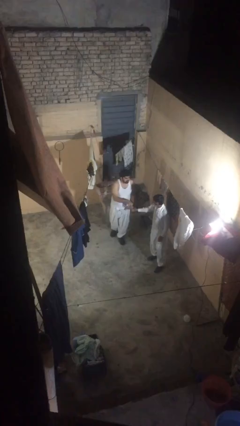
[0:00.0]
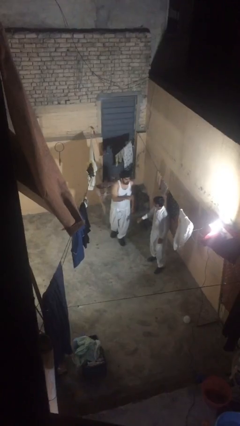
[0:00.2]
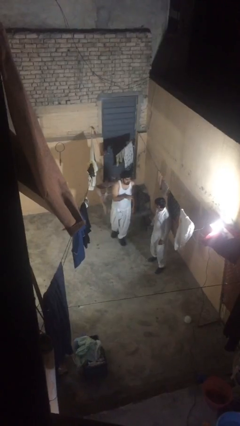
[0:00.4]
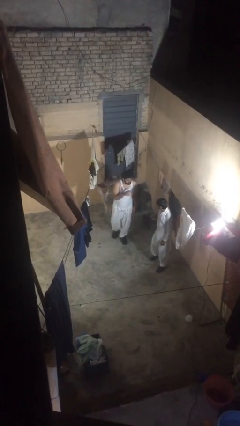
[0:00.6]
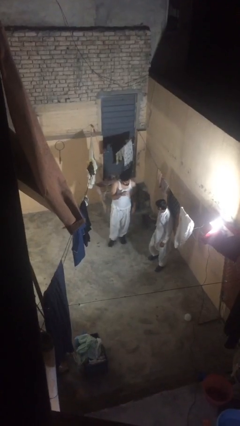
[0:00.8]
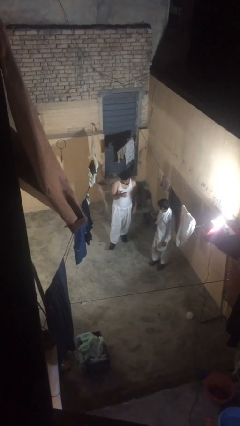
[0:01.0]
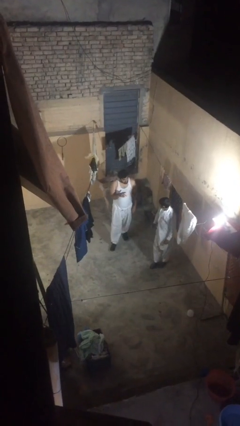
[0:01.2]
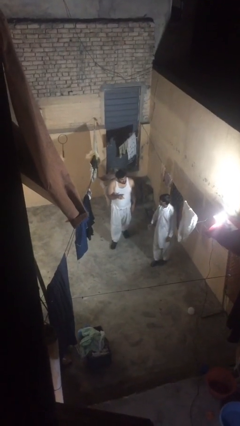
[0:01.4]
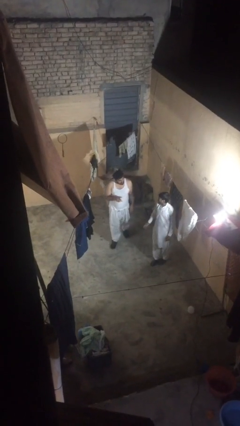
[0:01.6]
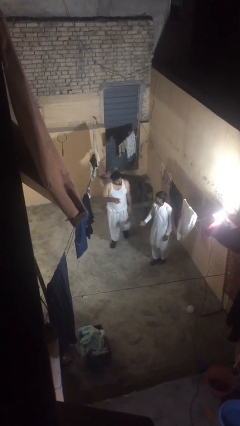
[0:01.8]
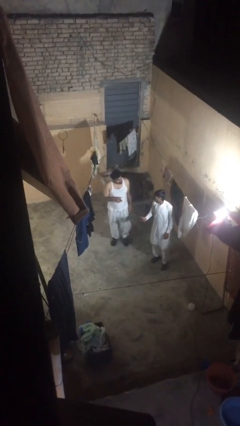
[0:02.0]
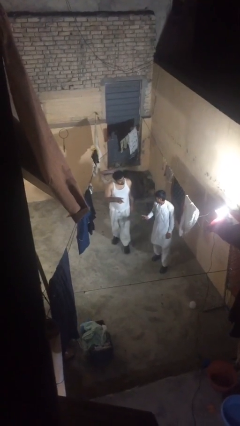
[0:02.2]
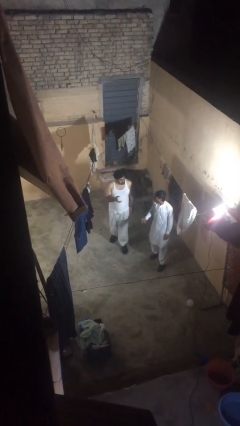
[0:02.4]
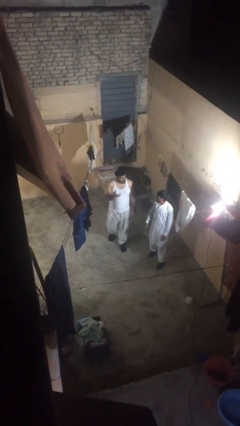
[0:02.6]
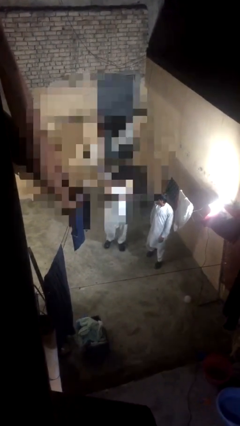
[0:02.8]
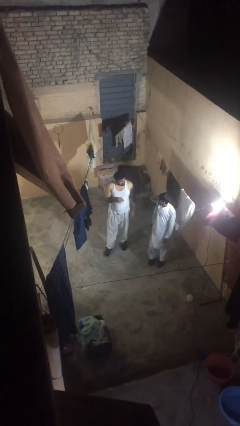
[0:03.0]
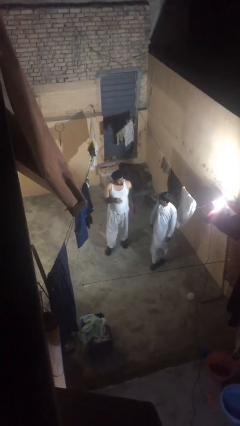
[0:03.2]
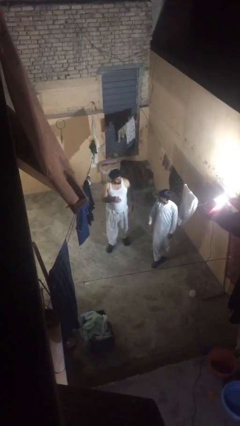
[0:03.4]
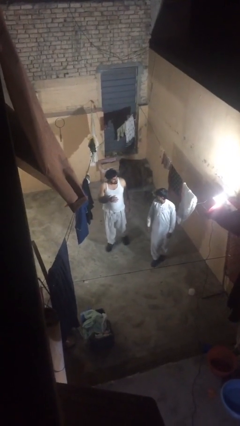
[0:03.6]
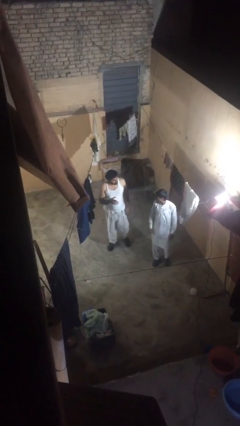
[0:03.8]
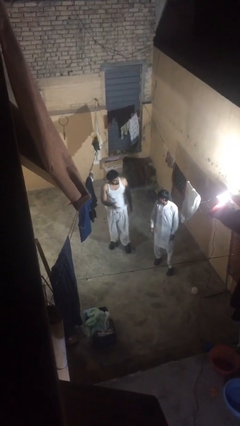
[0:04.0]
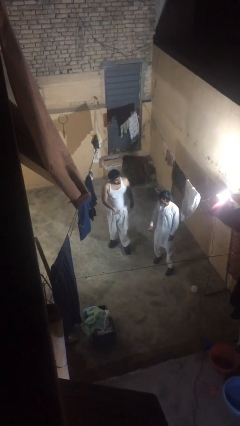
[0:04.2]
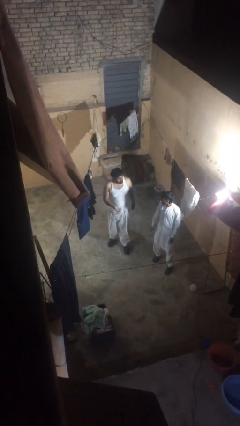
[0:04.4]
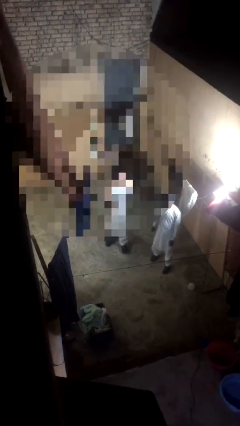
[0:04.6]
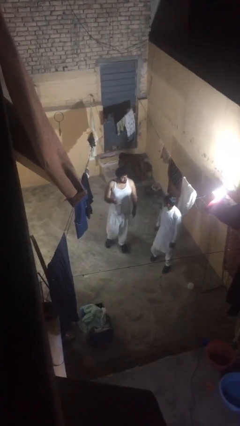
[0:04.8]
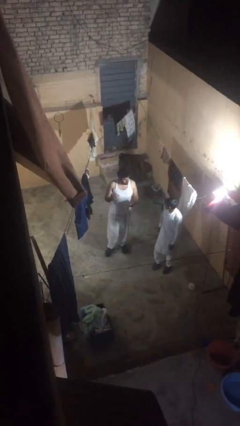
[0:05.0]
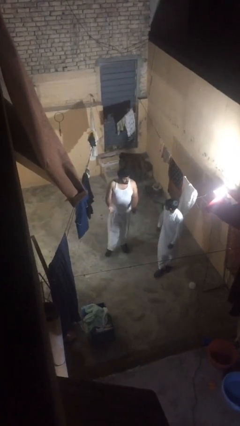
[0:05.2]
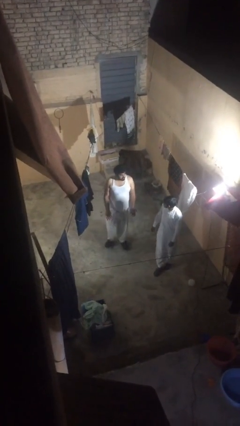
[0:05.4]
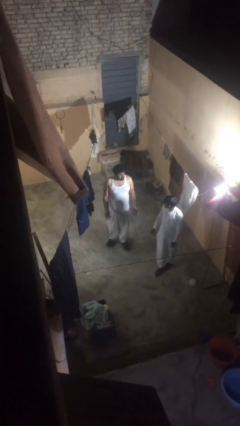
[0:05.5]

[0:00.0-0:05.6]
person talks to person

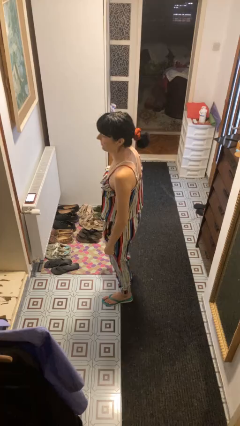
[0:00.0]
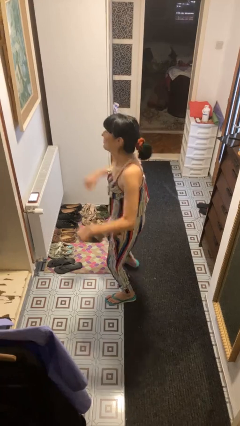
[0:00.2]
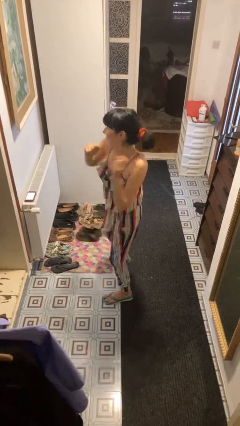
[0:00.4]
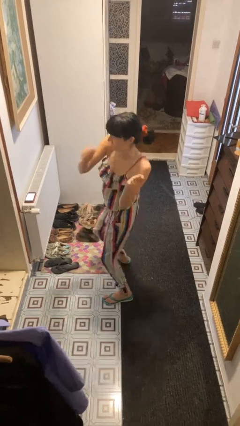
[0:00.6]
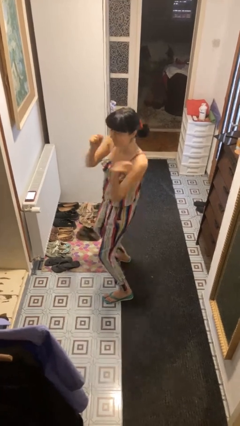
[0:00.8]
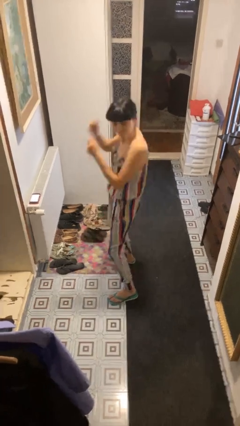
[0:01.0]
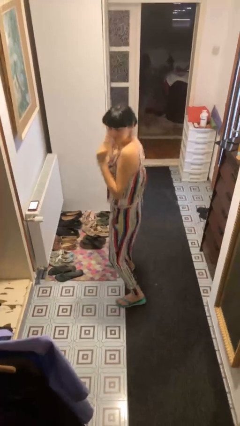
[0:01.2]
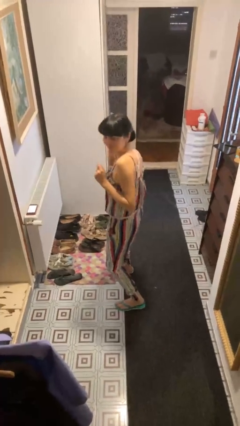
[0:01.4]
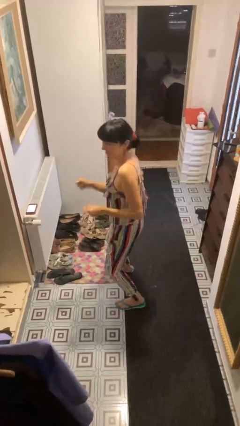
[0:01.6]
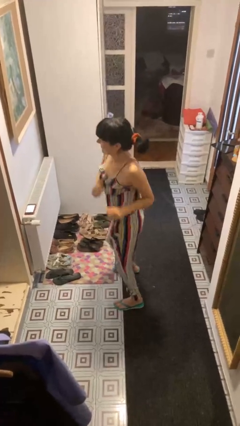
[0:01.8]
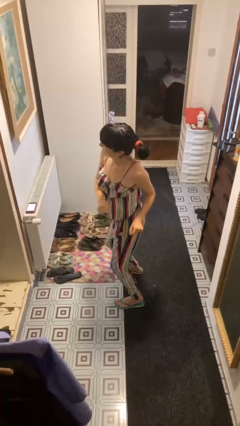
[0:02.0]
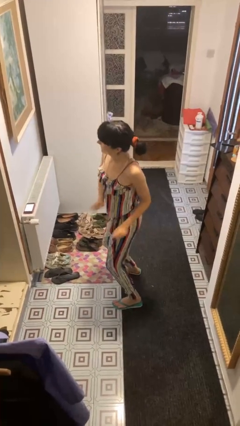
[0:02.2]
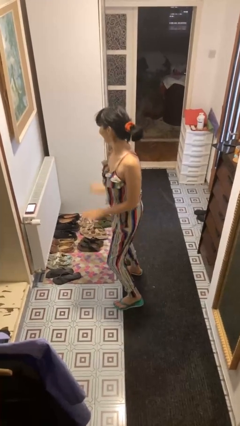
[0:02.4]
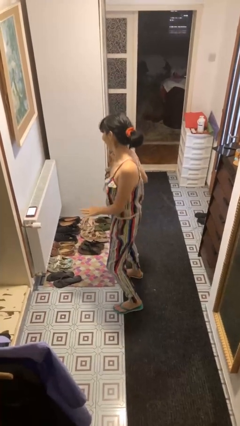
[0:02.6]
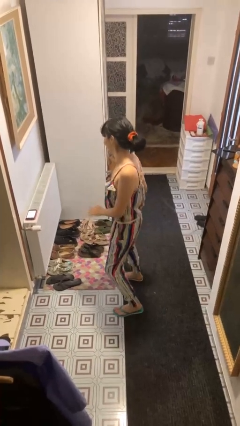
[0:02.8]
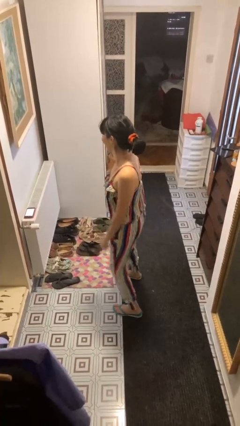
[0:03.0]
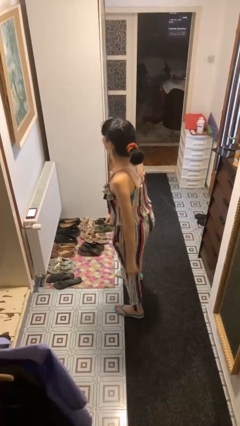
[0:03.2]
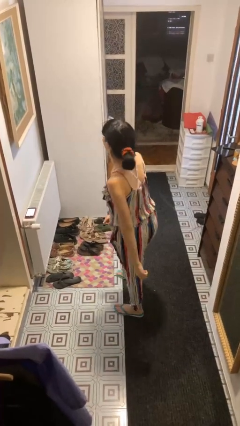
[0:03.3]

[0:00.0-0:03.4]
person dances in place

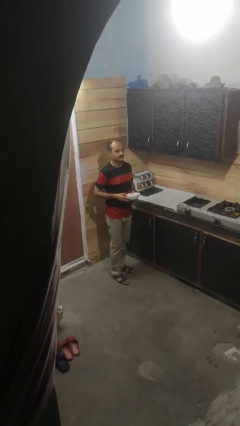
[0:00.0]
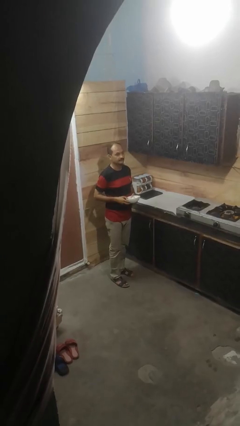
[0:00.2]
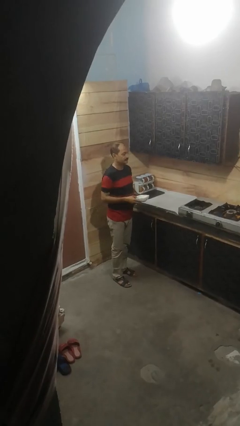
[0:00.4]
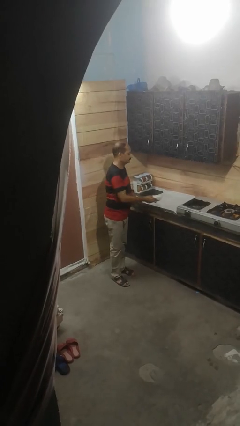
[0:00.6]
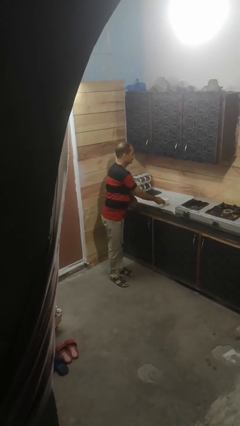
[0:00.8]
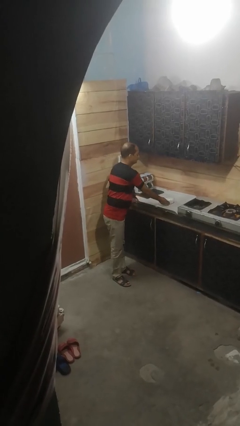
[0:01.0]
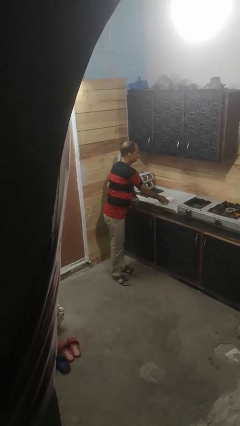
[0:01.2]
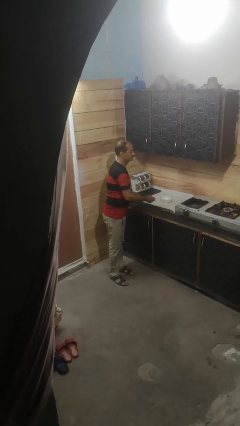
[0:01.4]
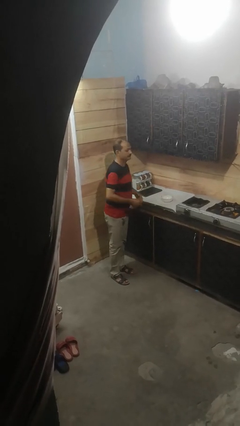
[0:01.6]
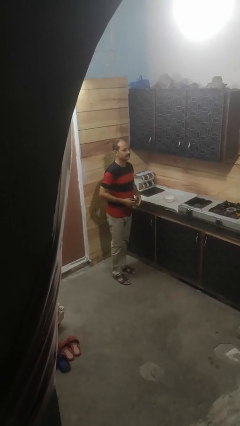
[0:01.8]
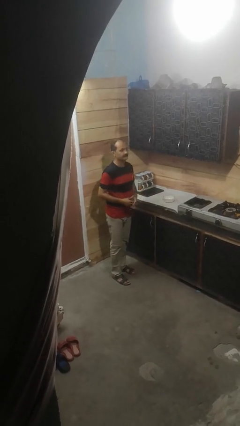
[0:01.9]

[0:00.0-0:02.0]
person puts down object on countertop

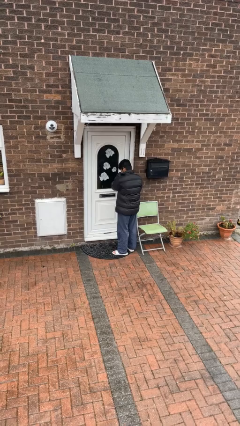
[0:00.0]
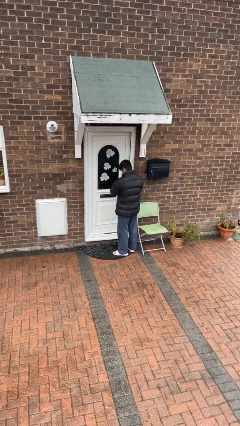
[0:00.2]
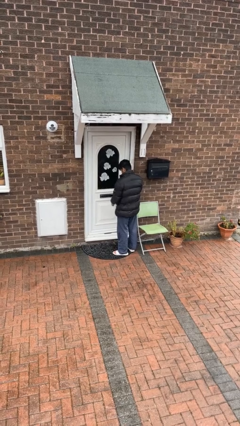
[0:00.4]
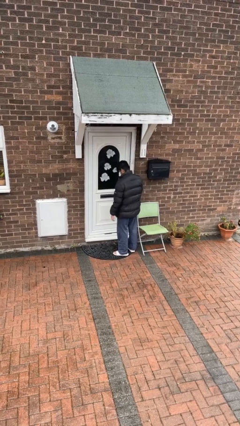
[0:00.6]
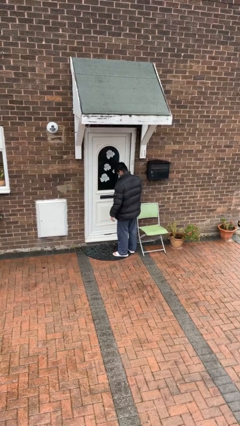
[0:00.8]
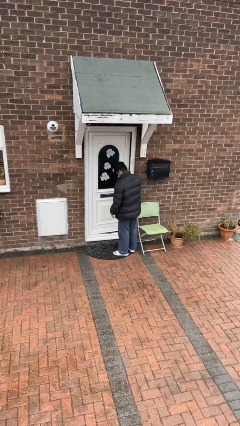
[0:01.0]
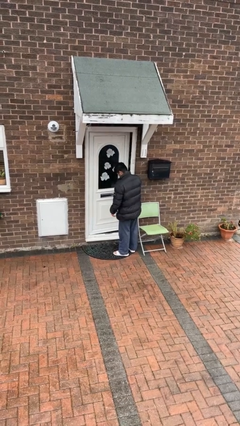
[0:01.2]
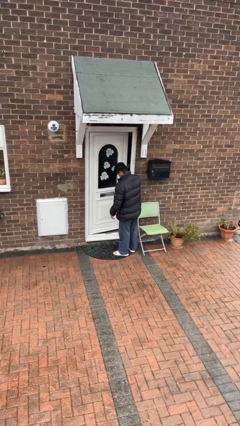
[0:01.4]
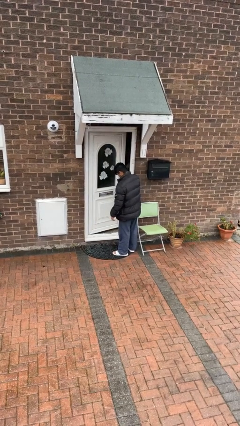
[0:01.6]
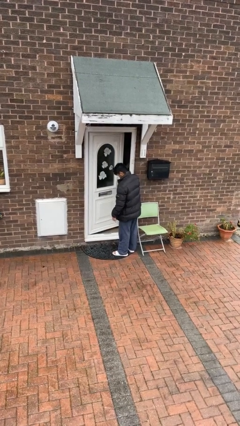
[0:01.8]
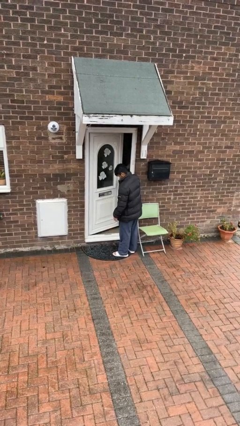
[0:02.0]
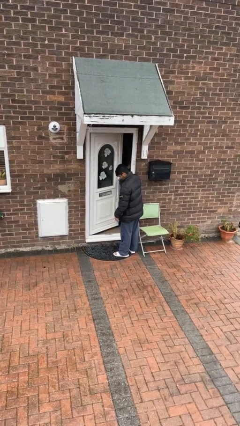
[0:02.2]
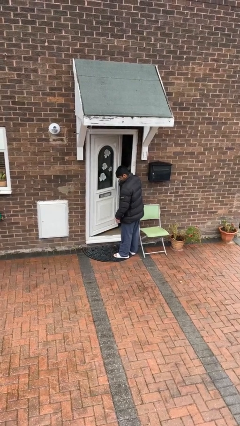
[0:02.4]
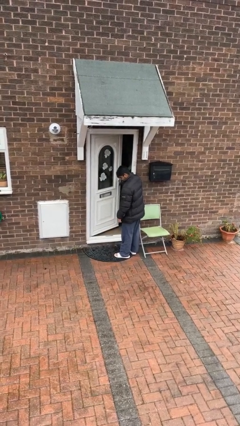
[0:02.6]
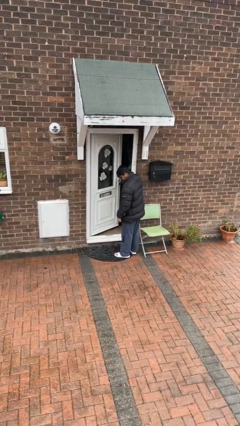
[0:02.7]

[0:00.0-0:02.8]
person opens facility door

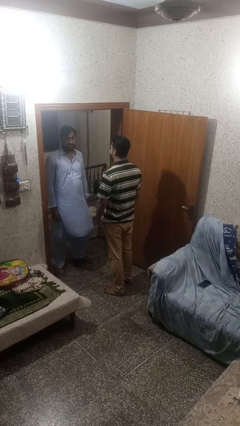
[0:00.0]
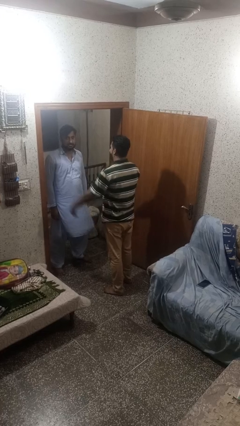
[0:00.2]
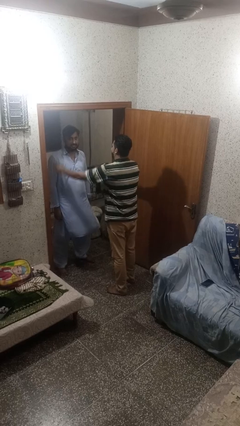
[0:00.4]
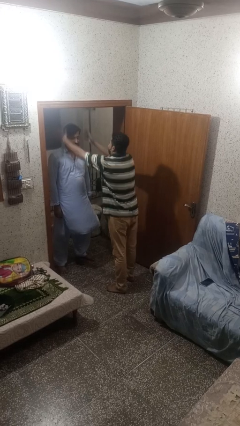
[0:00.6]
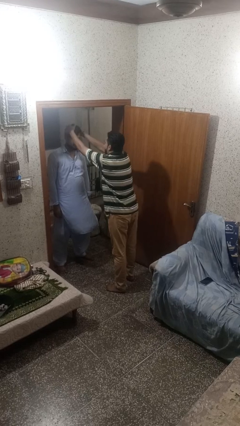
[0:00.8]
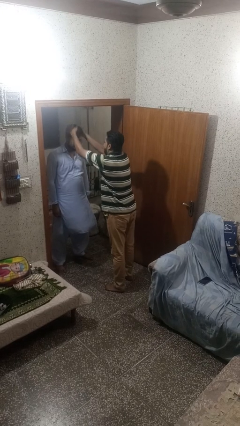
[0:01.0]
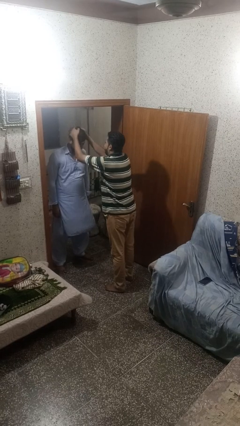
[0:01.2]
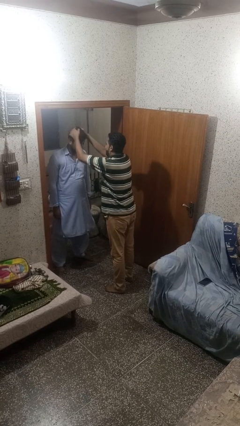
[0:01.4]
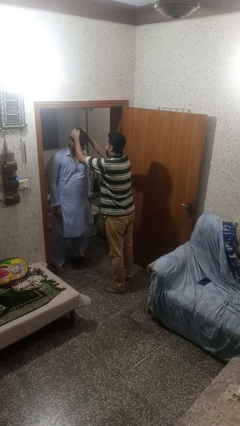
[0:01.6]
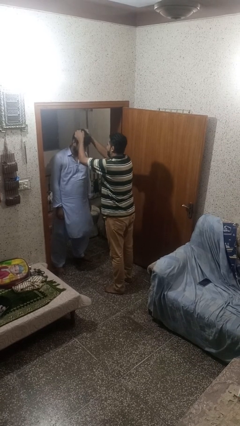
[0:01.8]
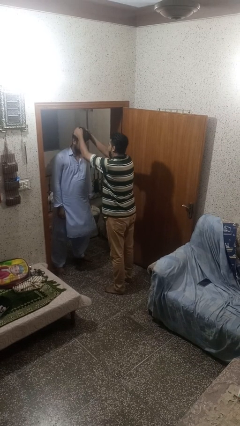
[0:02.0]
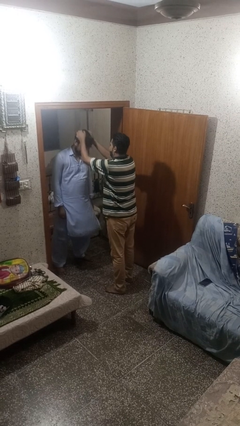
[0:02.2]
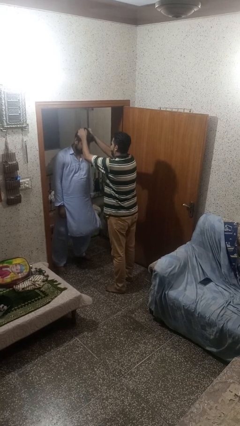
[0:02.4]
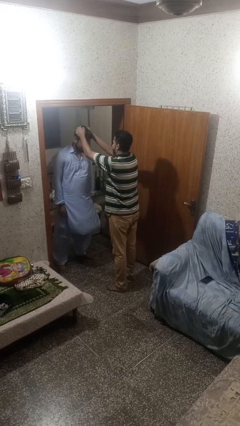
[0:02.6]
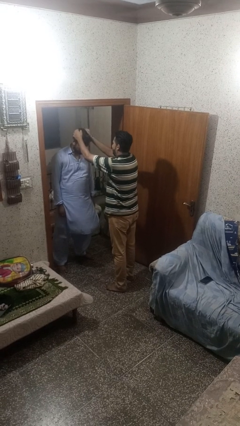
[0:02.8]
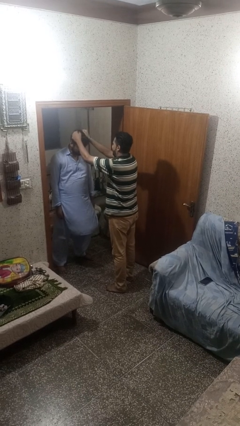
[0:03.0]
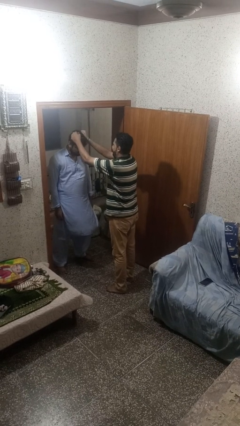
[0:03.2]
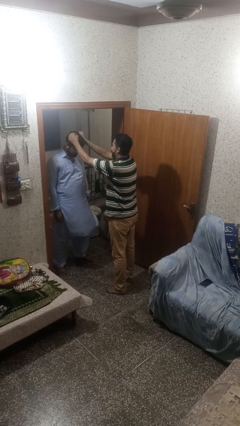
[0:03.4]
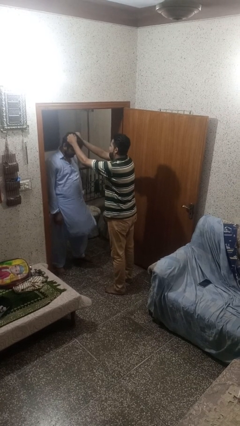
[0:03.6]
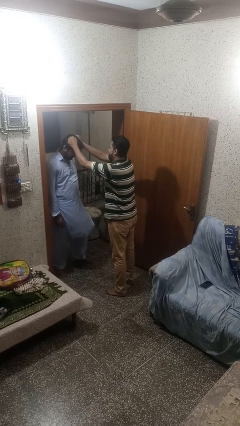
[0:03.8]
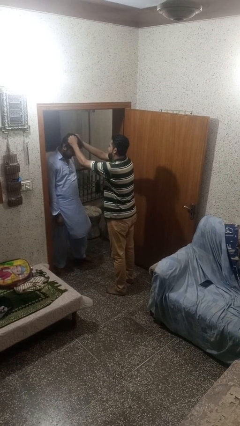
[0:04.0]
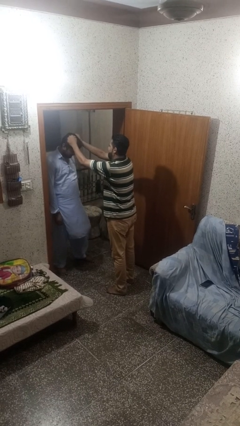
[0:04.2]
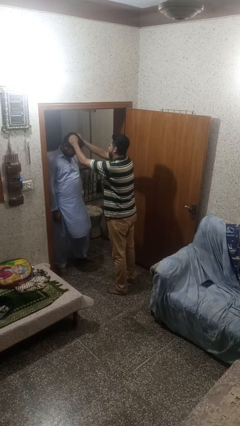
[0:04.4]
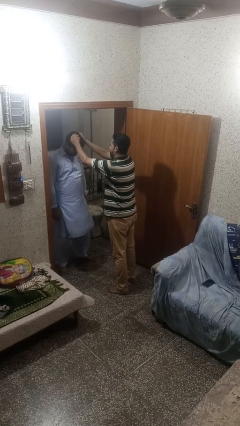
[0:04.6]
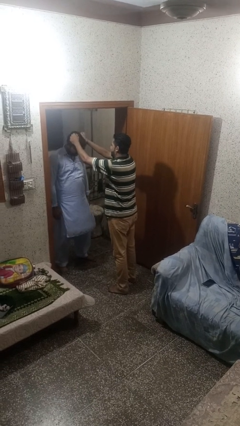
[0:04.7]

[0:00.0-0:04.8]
person grabs person by hair
